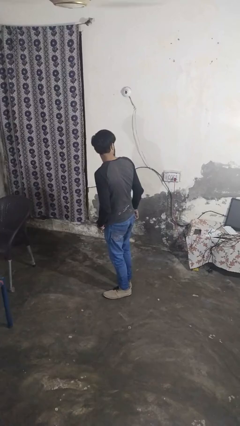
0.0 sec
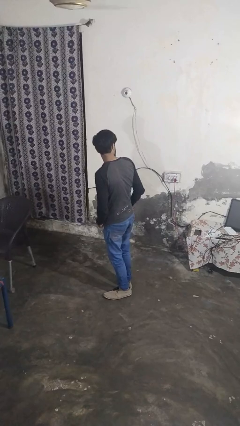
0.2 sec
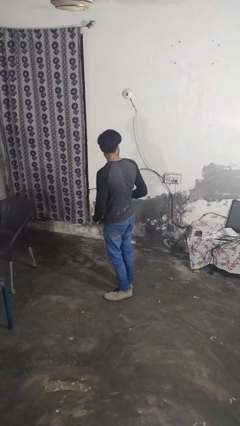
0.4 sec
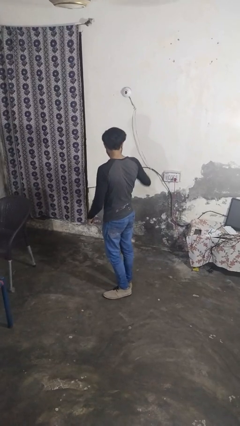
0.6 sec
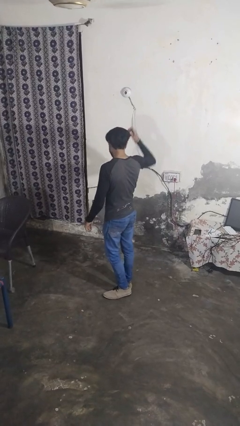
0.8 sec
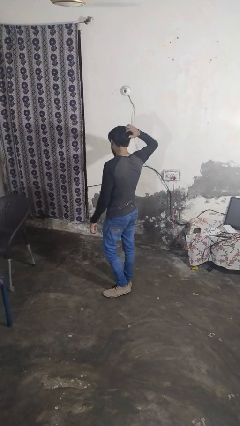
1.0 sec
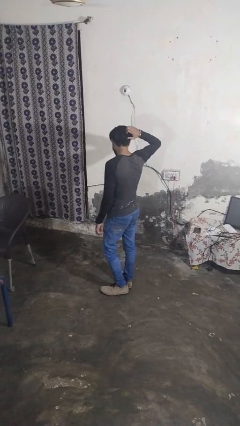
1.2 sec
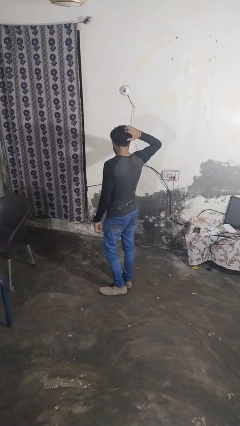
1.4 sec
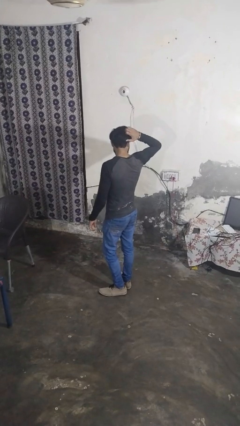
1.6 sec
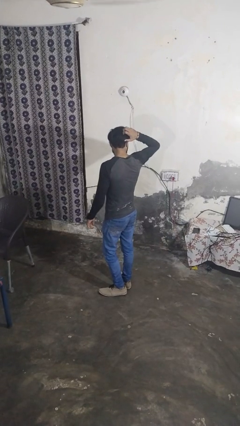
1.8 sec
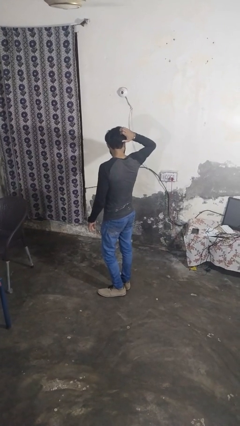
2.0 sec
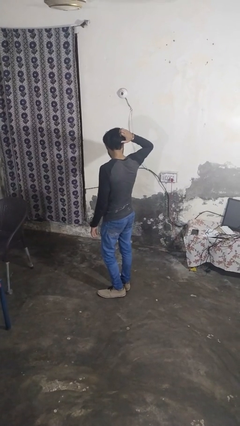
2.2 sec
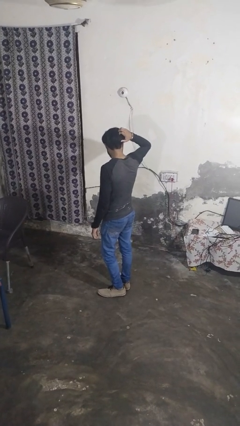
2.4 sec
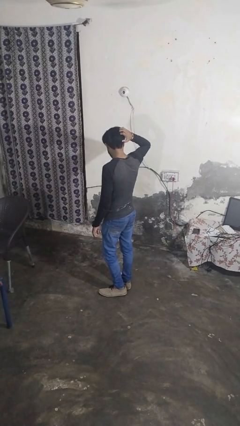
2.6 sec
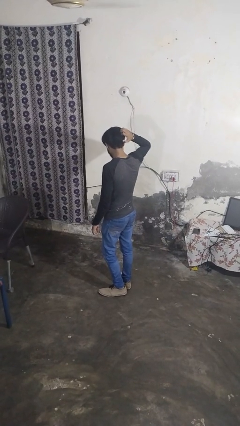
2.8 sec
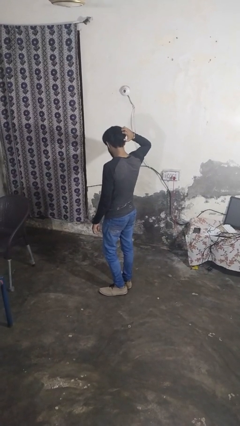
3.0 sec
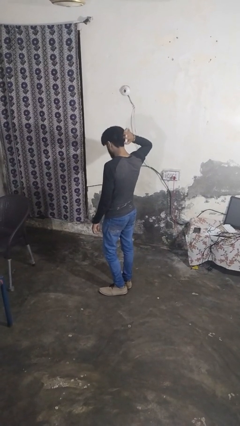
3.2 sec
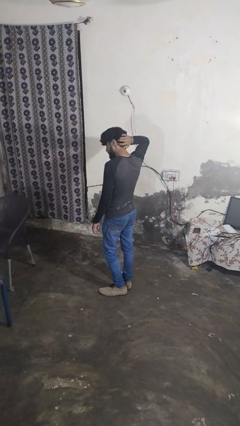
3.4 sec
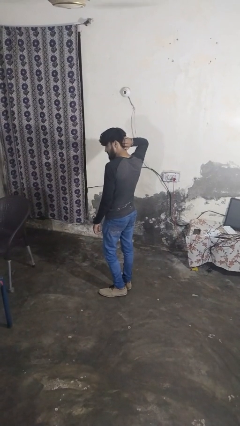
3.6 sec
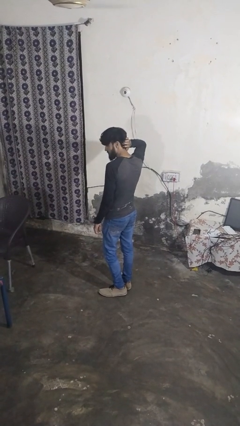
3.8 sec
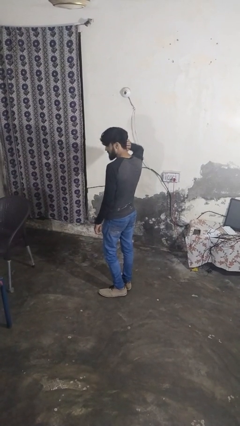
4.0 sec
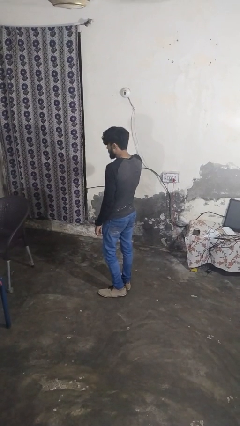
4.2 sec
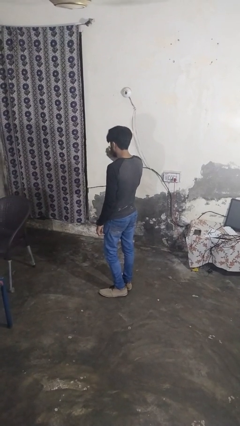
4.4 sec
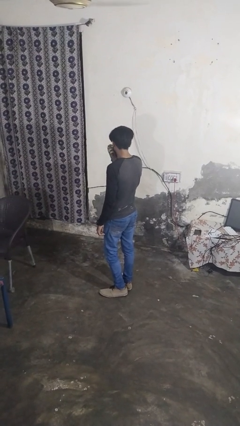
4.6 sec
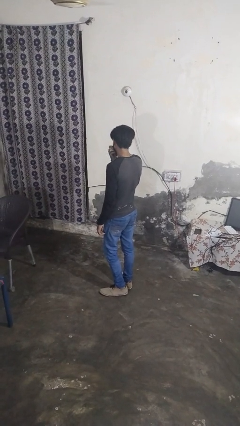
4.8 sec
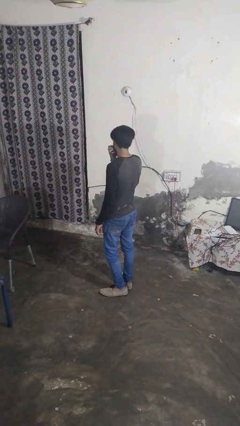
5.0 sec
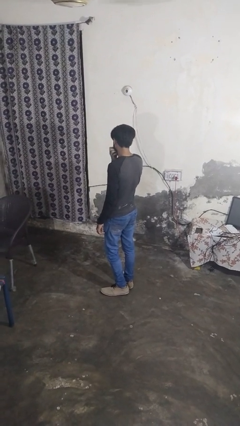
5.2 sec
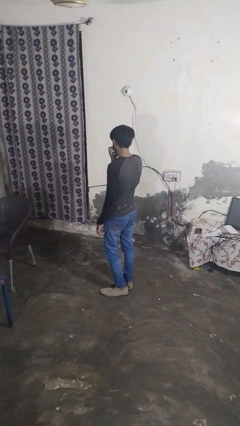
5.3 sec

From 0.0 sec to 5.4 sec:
person scratches face

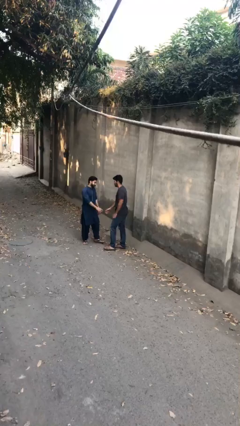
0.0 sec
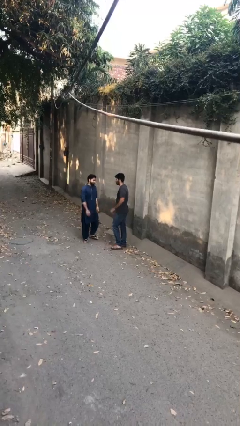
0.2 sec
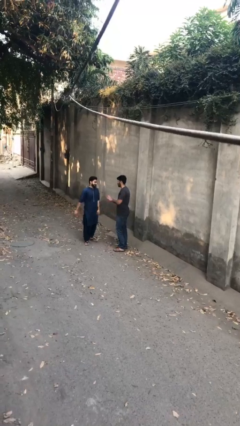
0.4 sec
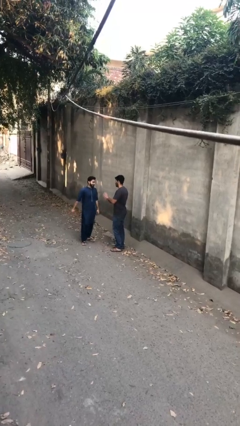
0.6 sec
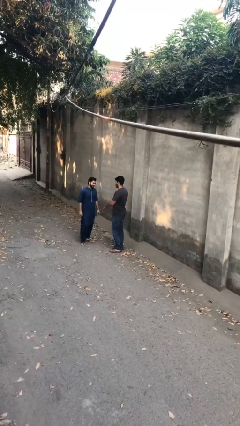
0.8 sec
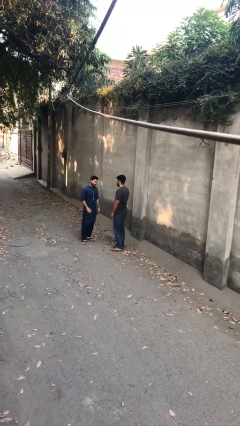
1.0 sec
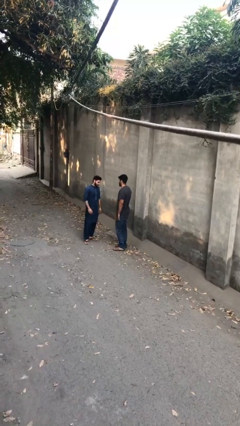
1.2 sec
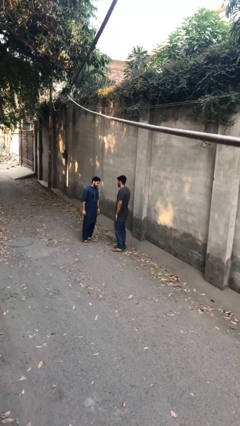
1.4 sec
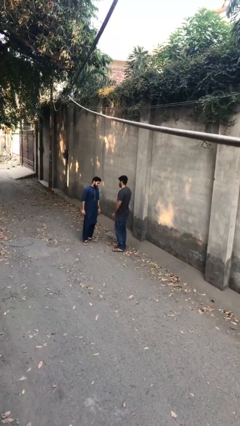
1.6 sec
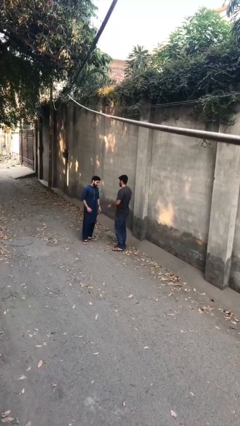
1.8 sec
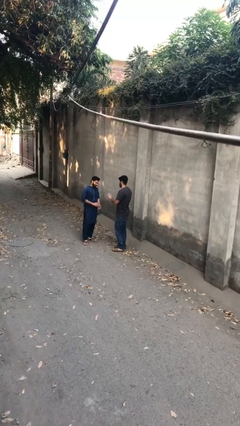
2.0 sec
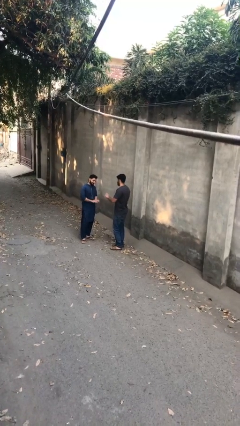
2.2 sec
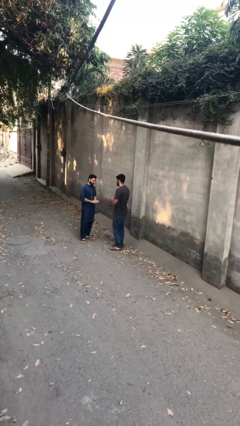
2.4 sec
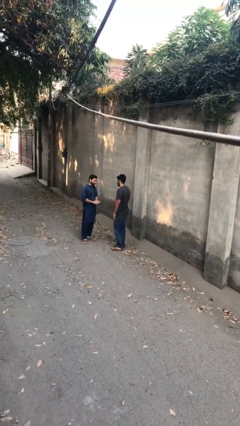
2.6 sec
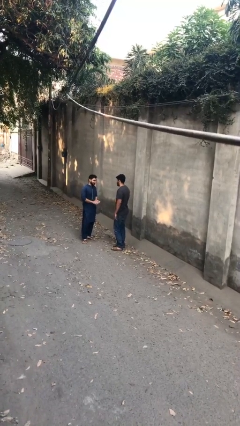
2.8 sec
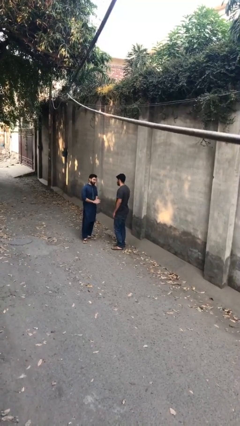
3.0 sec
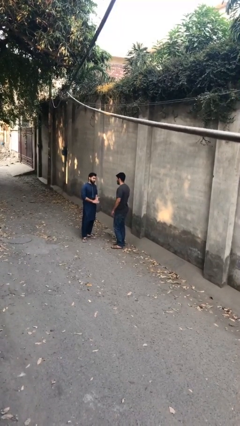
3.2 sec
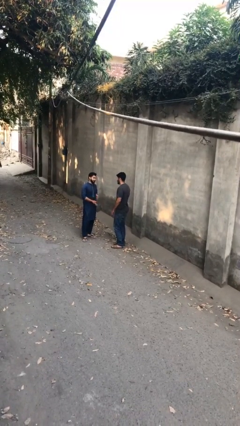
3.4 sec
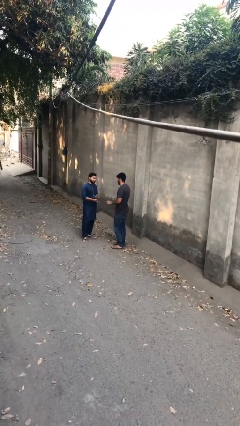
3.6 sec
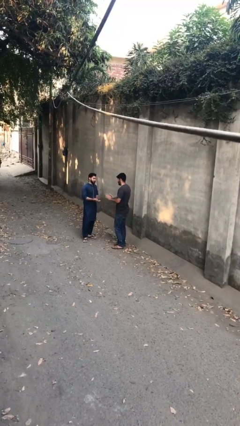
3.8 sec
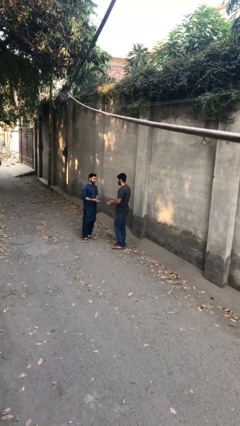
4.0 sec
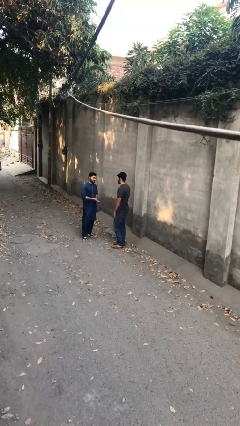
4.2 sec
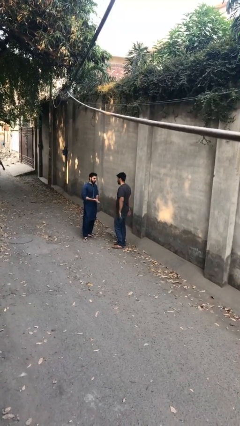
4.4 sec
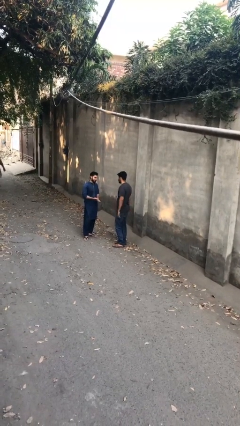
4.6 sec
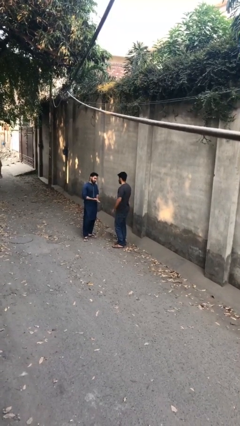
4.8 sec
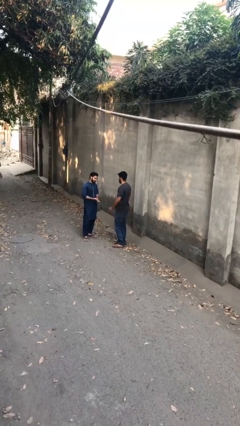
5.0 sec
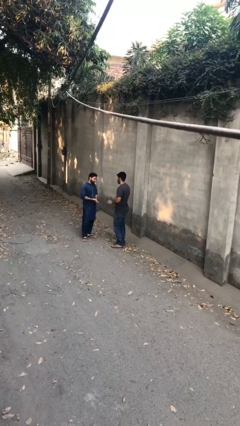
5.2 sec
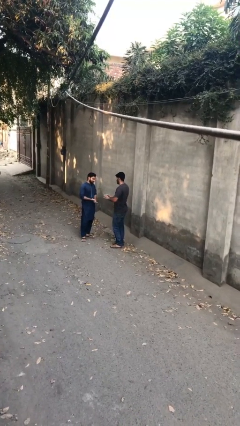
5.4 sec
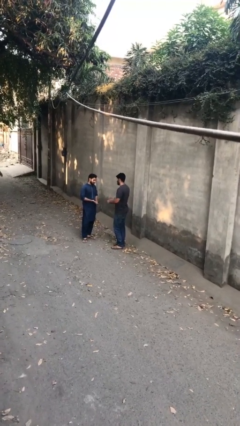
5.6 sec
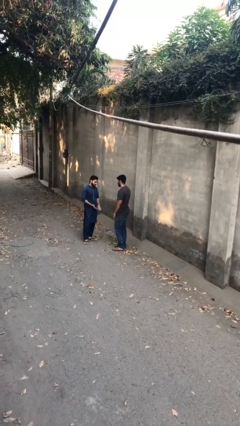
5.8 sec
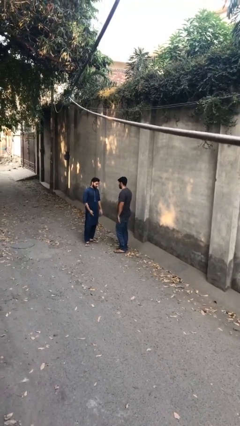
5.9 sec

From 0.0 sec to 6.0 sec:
person talks to person

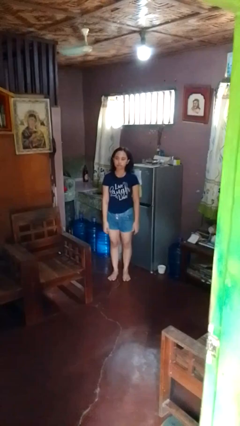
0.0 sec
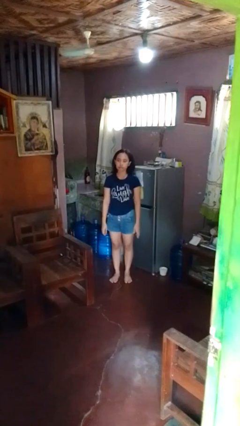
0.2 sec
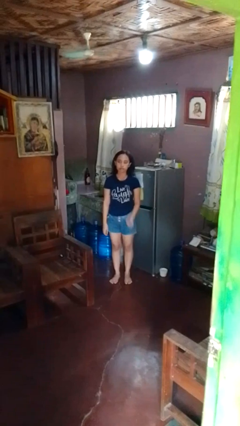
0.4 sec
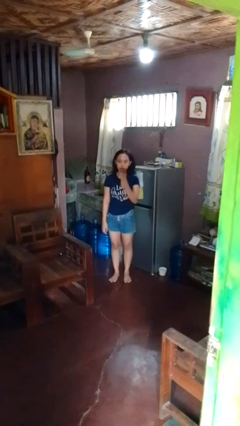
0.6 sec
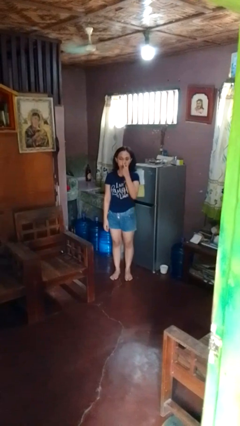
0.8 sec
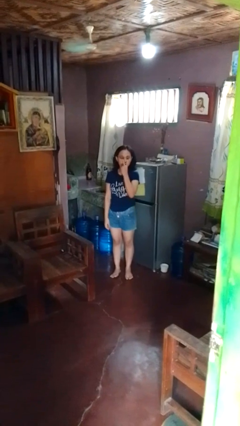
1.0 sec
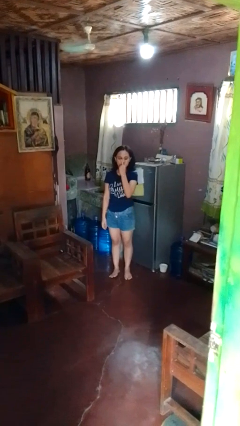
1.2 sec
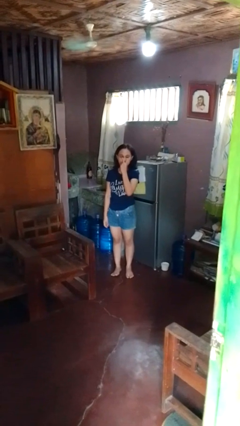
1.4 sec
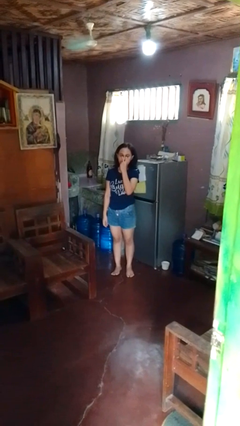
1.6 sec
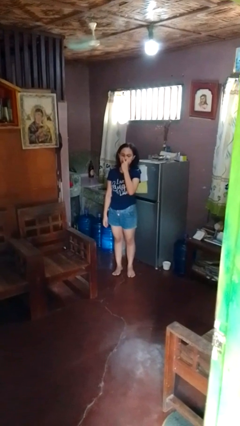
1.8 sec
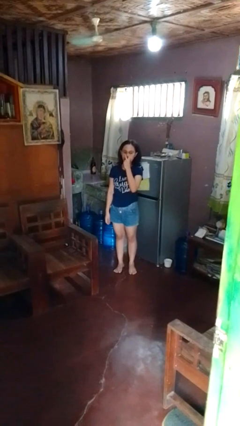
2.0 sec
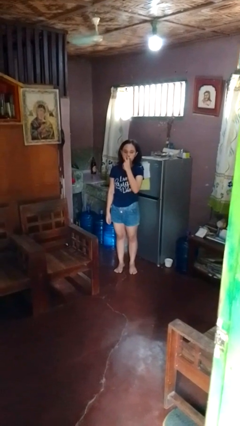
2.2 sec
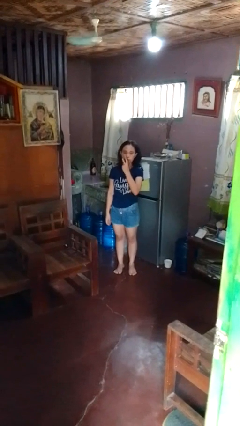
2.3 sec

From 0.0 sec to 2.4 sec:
person gestures watch closely

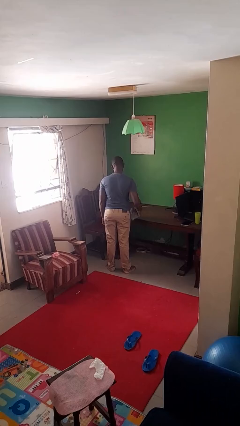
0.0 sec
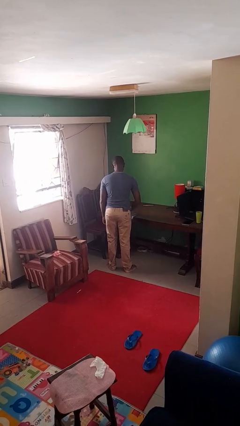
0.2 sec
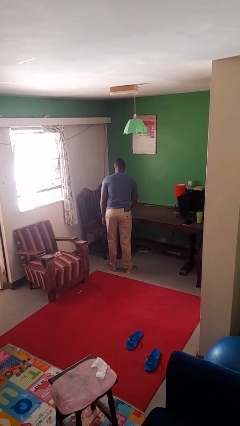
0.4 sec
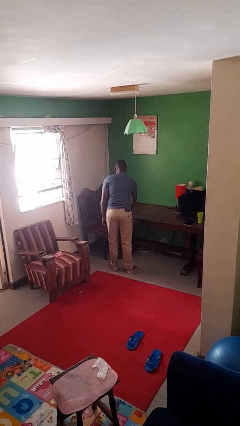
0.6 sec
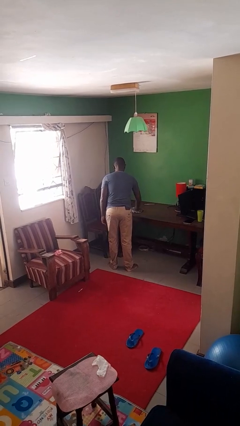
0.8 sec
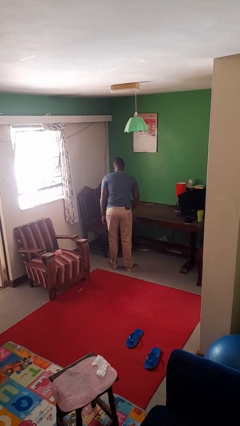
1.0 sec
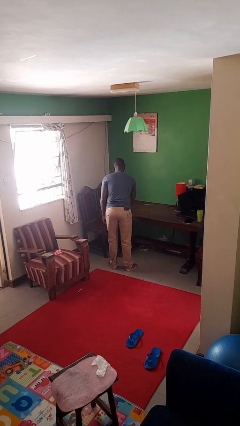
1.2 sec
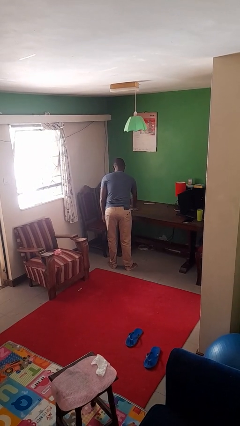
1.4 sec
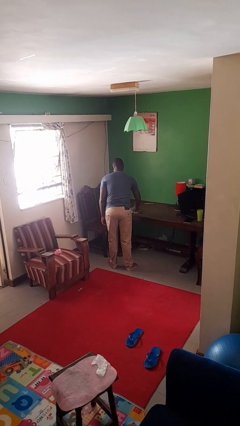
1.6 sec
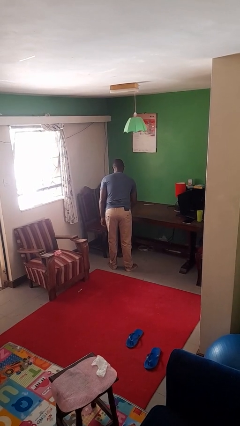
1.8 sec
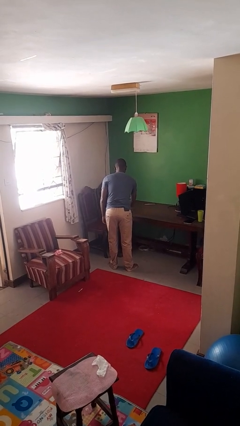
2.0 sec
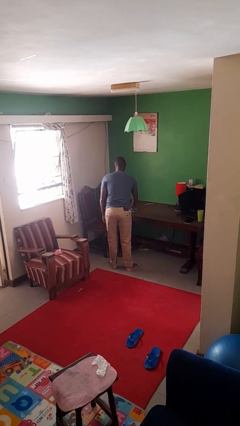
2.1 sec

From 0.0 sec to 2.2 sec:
person cleans table with rag

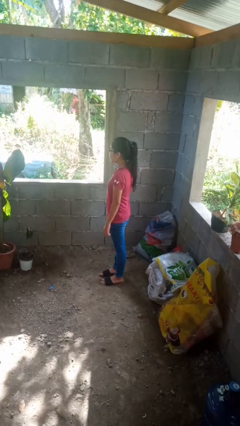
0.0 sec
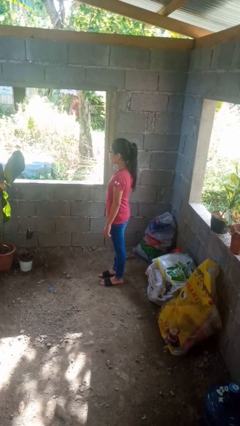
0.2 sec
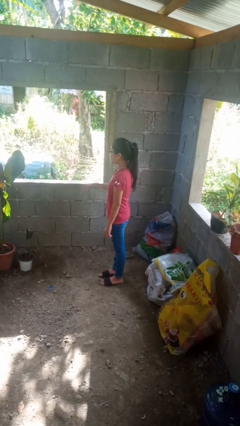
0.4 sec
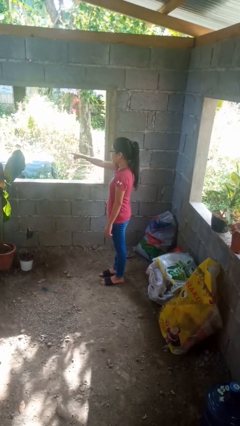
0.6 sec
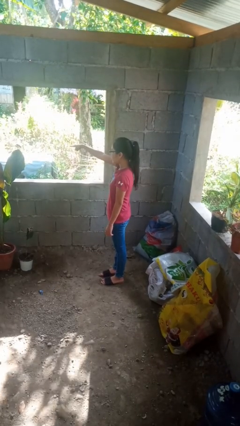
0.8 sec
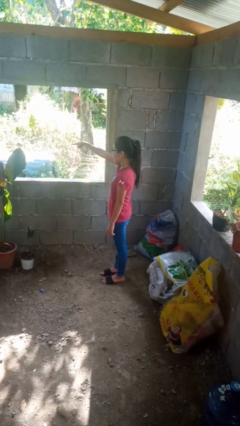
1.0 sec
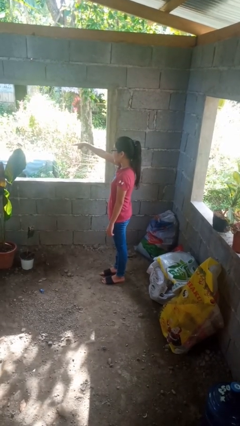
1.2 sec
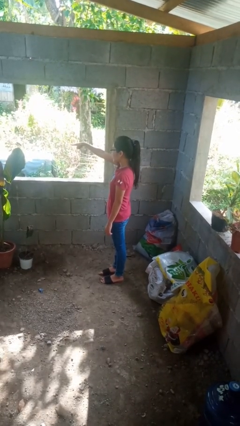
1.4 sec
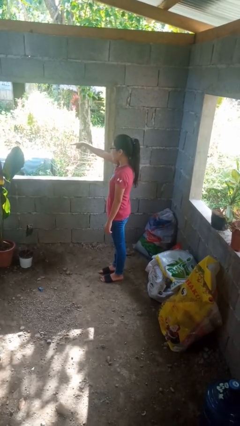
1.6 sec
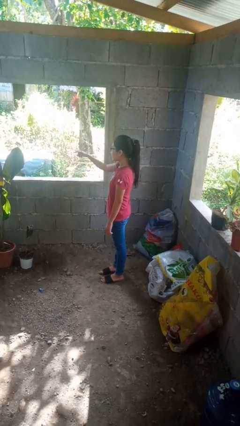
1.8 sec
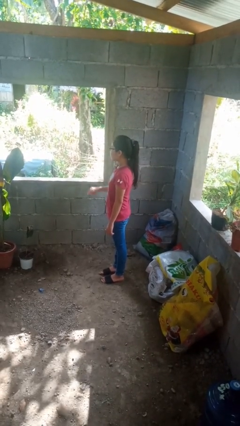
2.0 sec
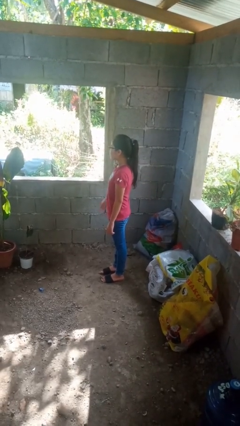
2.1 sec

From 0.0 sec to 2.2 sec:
person points at person
